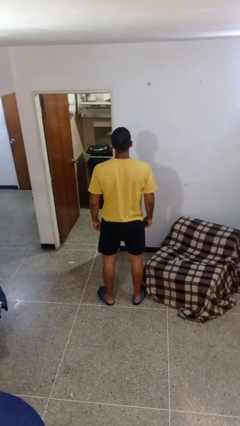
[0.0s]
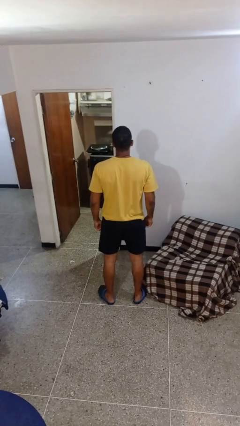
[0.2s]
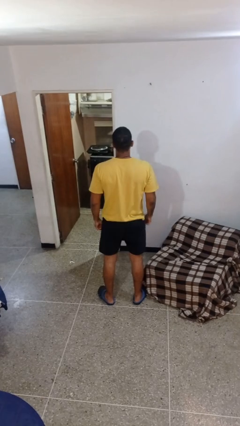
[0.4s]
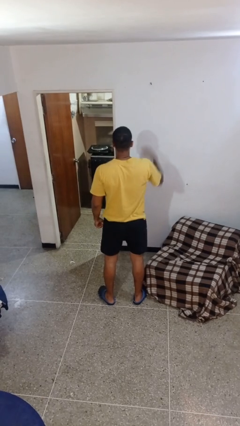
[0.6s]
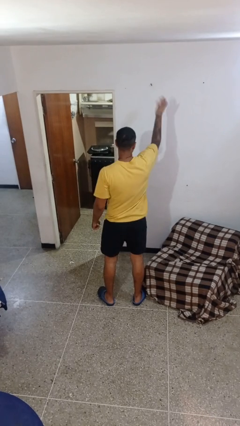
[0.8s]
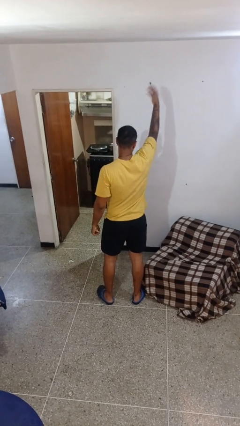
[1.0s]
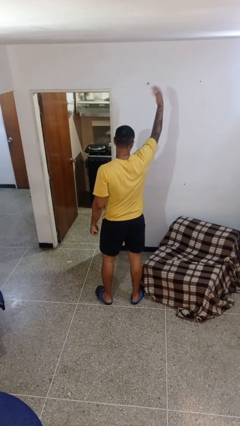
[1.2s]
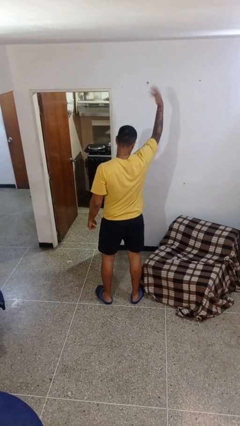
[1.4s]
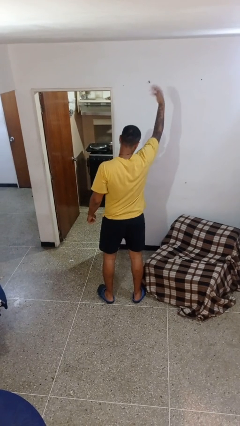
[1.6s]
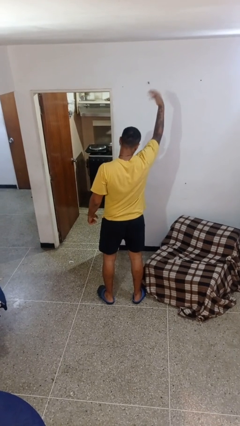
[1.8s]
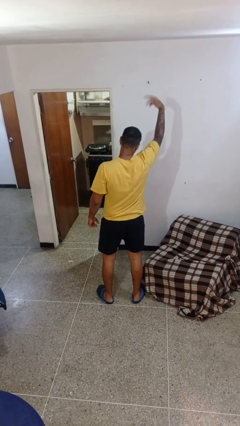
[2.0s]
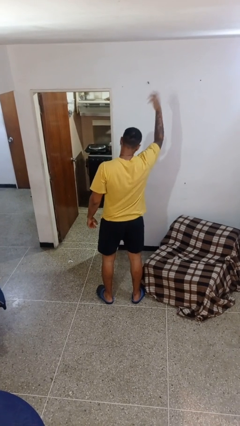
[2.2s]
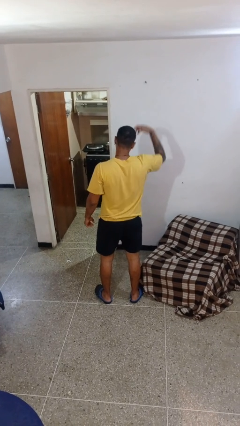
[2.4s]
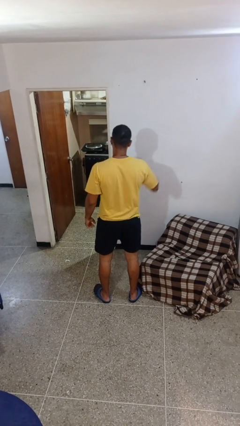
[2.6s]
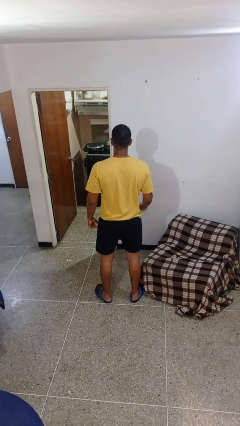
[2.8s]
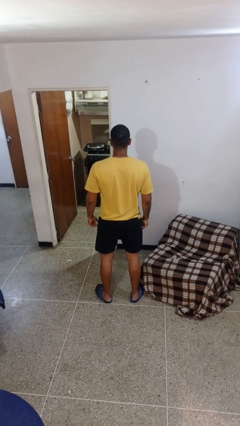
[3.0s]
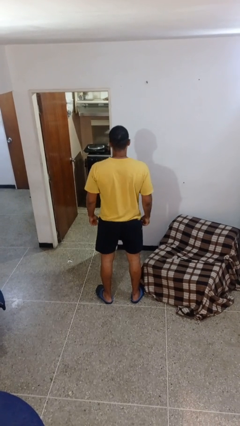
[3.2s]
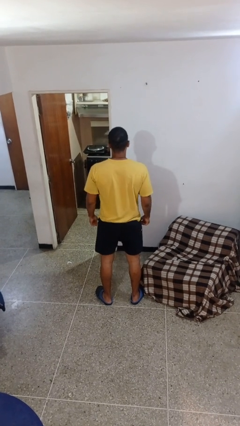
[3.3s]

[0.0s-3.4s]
person gestures come here

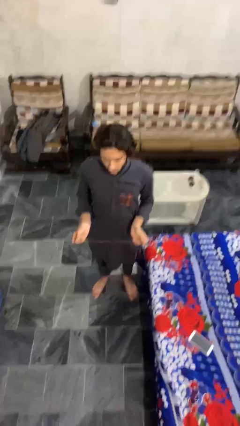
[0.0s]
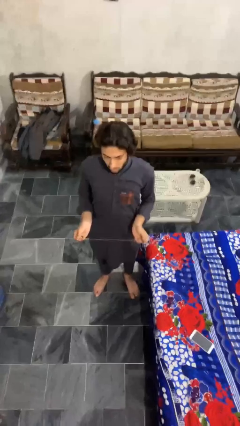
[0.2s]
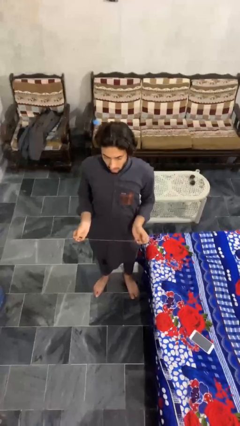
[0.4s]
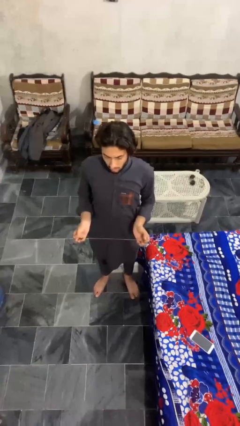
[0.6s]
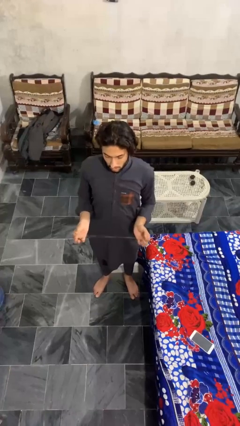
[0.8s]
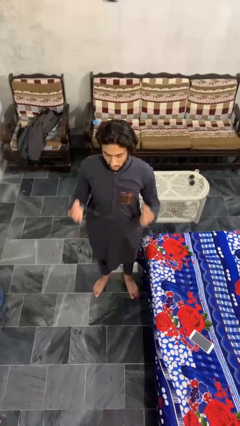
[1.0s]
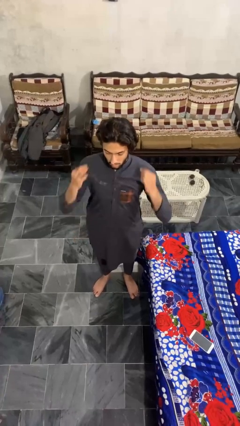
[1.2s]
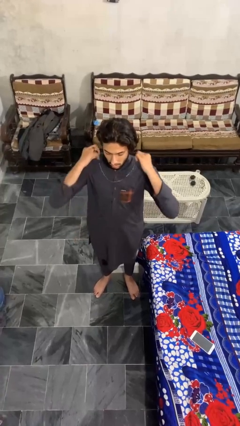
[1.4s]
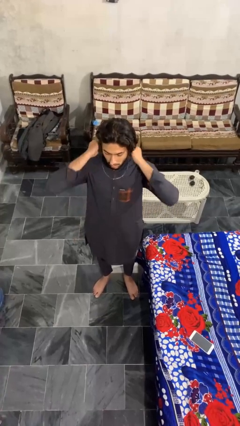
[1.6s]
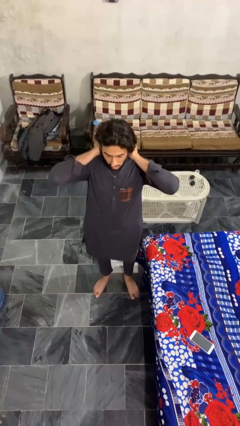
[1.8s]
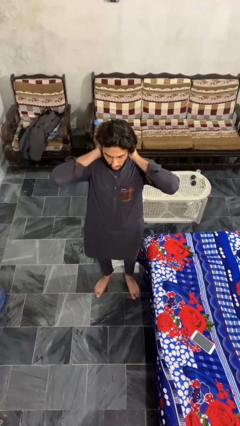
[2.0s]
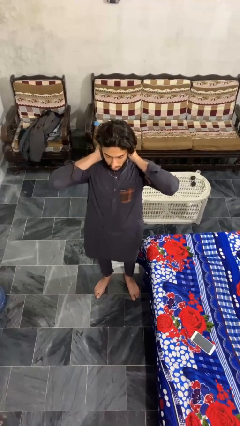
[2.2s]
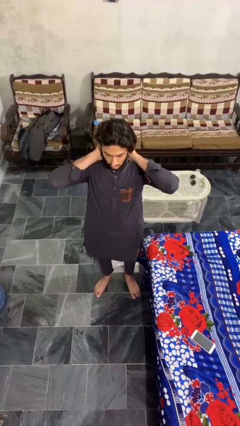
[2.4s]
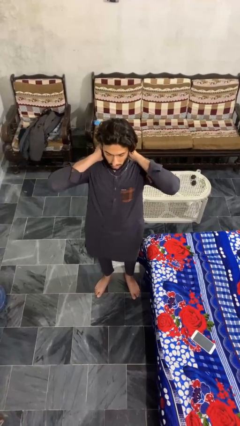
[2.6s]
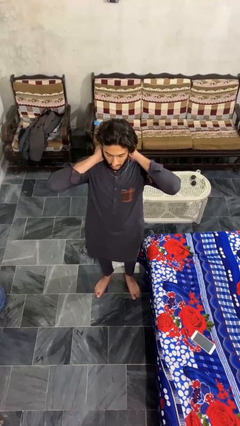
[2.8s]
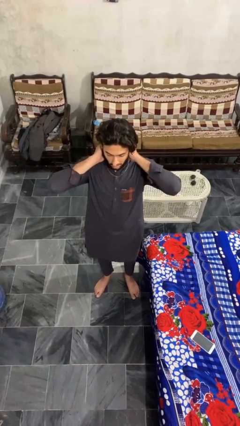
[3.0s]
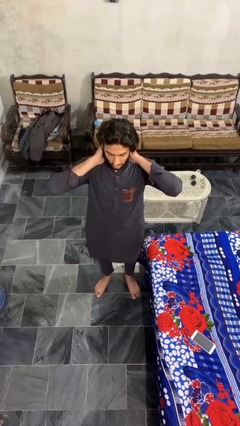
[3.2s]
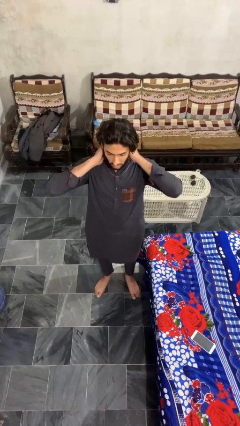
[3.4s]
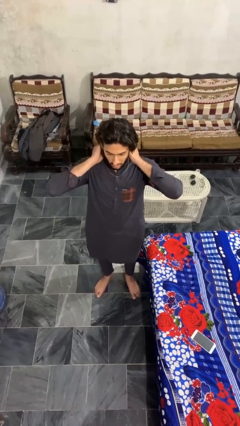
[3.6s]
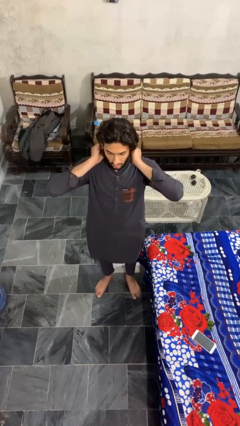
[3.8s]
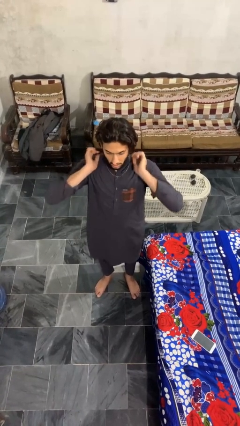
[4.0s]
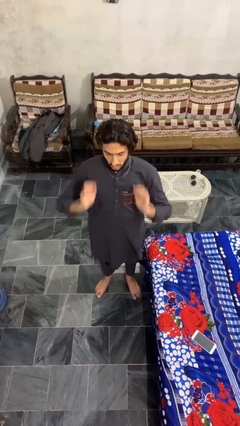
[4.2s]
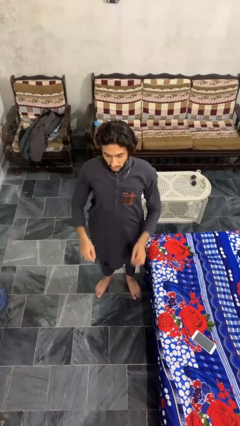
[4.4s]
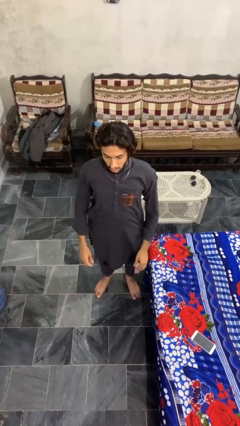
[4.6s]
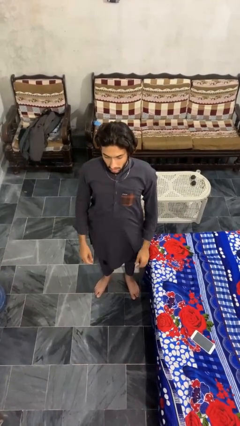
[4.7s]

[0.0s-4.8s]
person puts on necklace

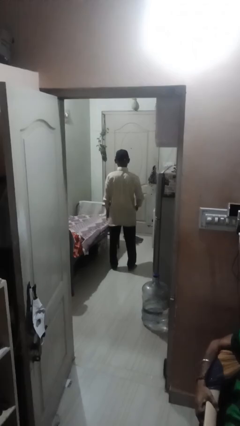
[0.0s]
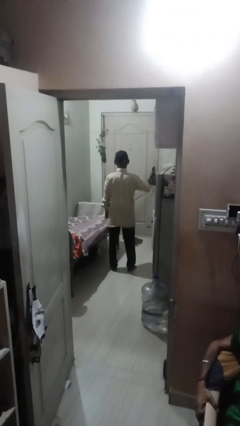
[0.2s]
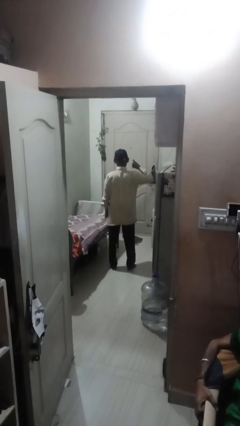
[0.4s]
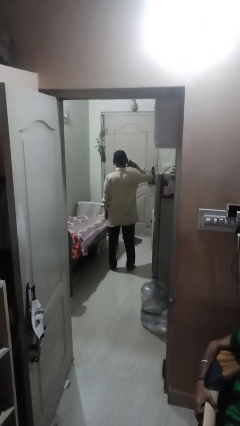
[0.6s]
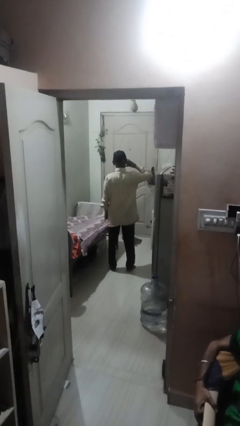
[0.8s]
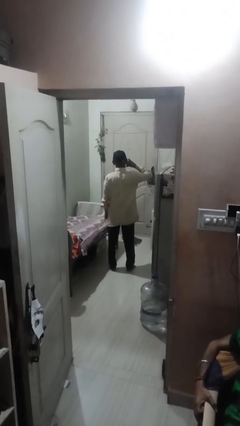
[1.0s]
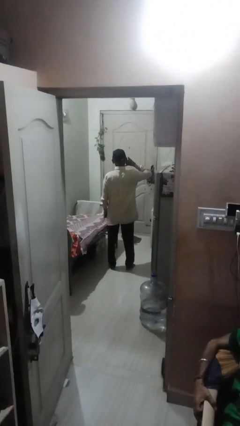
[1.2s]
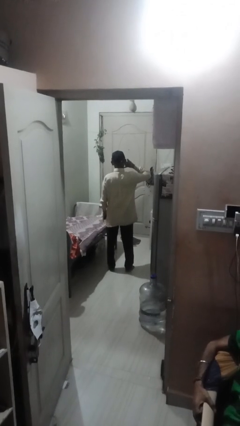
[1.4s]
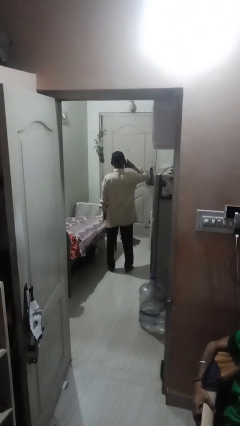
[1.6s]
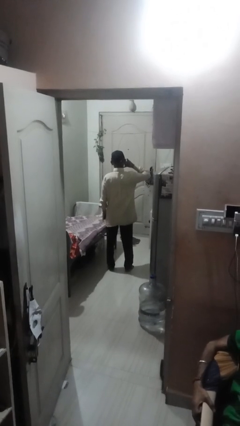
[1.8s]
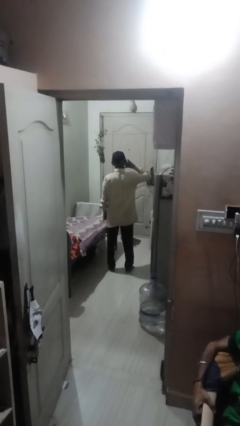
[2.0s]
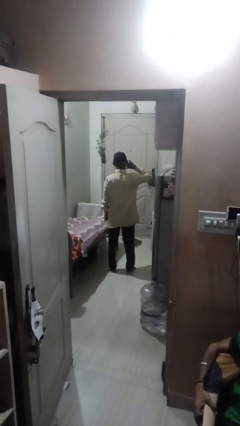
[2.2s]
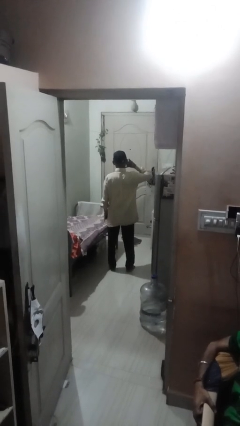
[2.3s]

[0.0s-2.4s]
person gestures call me

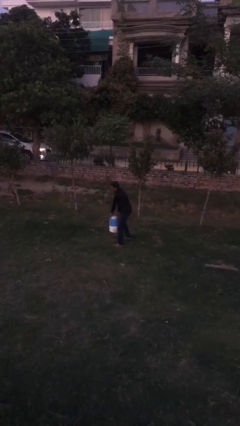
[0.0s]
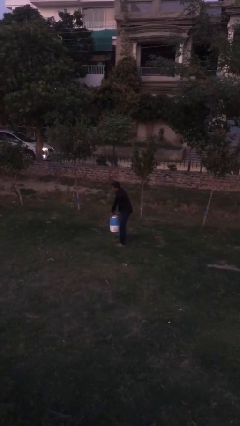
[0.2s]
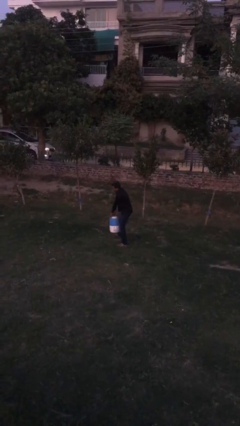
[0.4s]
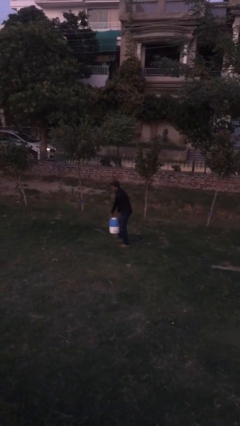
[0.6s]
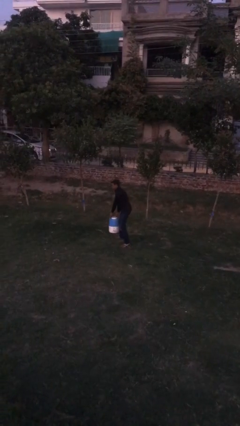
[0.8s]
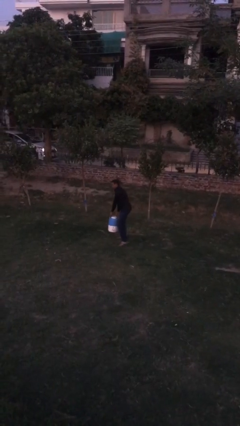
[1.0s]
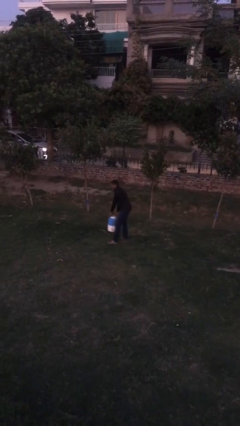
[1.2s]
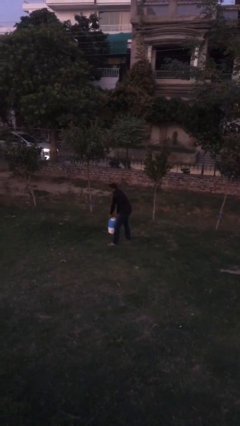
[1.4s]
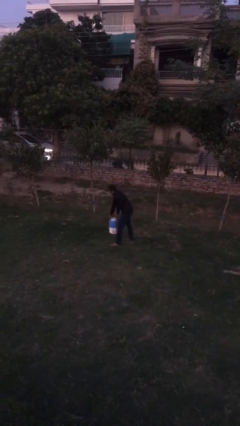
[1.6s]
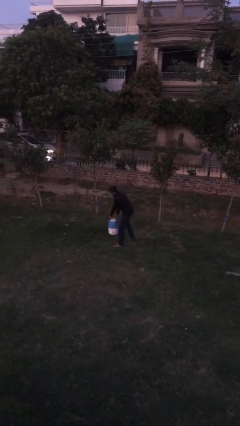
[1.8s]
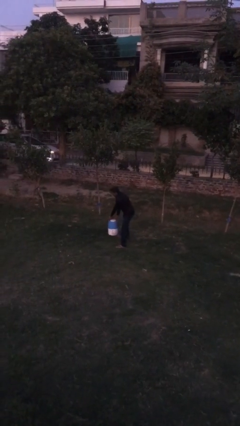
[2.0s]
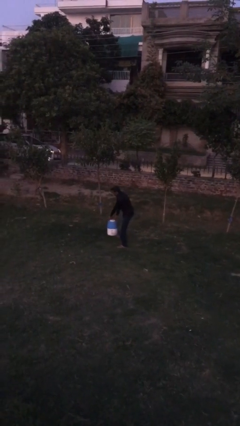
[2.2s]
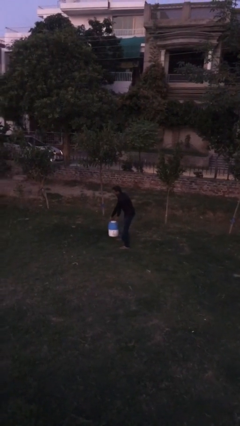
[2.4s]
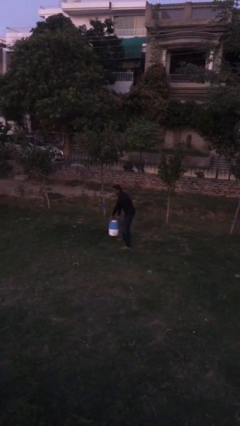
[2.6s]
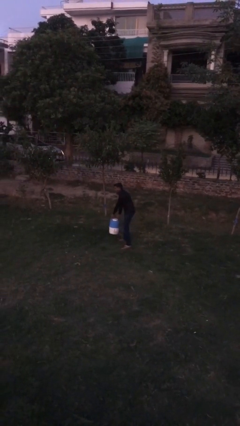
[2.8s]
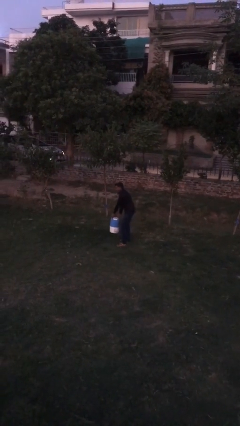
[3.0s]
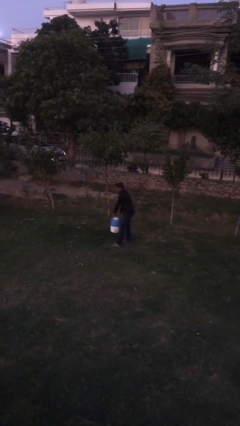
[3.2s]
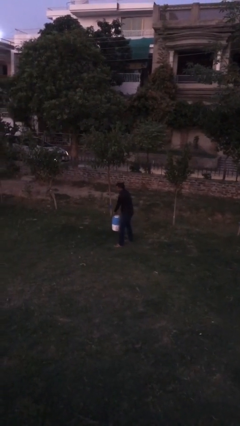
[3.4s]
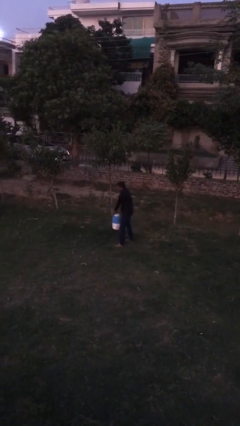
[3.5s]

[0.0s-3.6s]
person carries heavy object

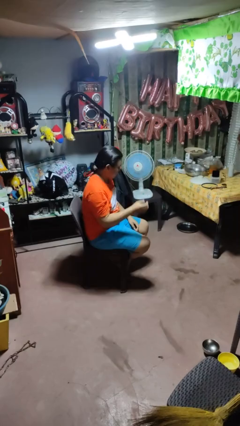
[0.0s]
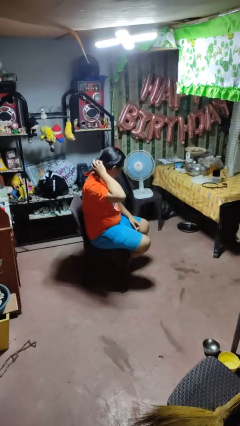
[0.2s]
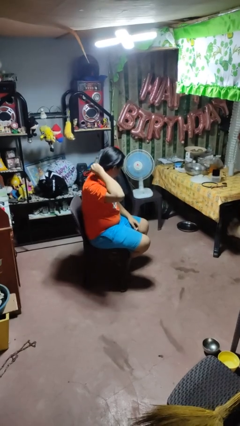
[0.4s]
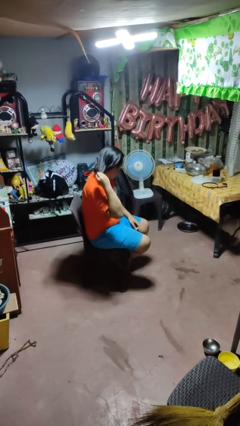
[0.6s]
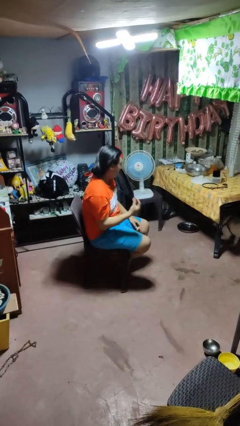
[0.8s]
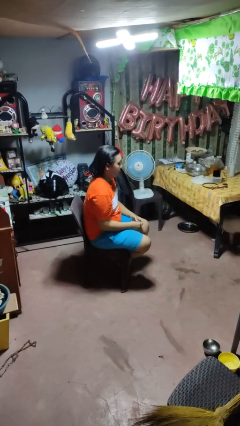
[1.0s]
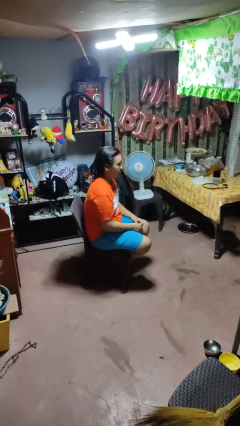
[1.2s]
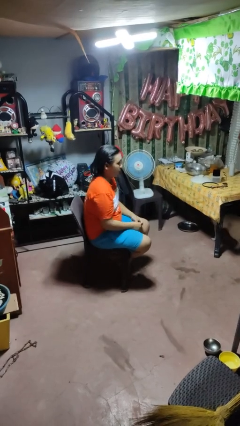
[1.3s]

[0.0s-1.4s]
person takes off hairtie

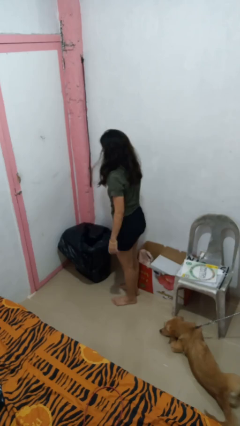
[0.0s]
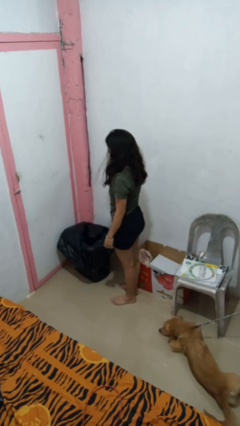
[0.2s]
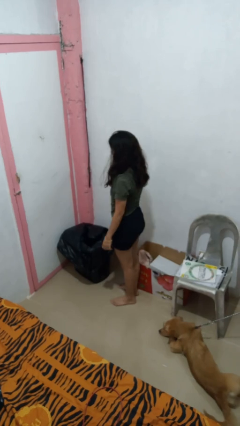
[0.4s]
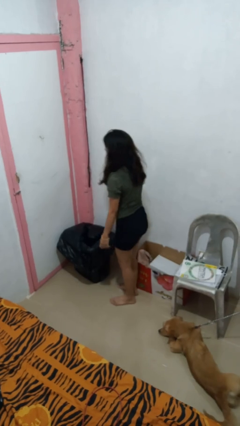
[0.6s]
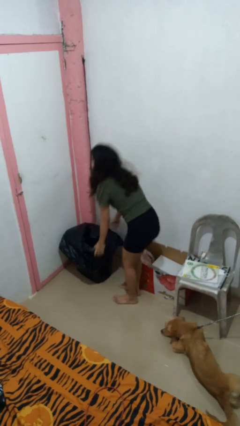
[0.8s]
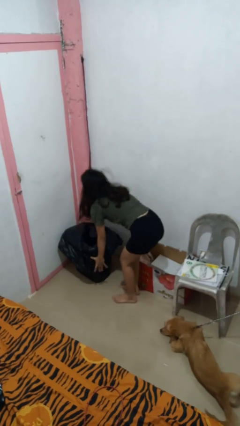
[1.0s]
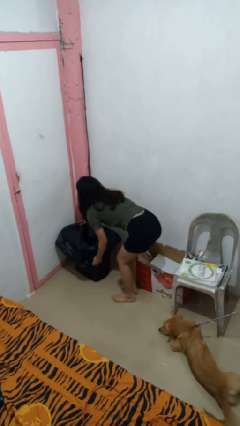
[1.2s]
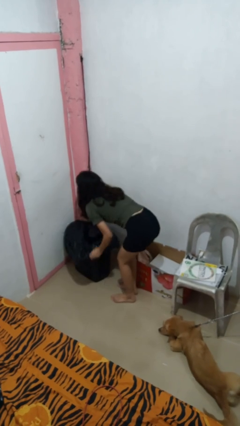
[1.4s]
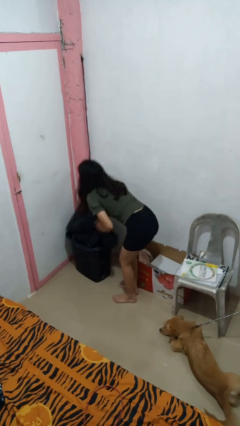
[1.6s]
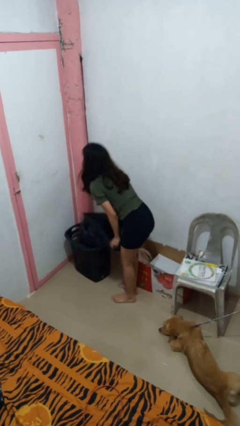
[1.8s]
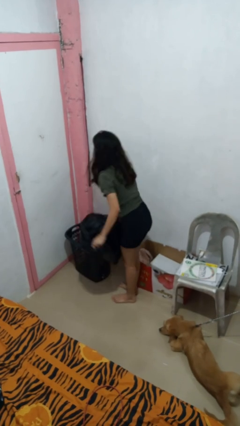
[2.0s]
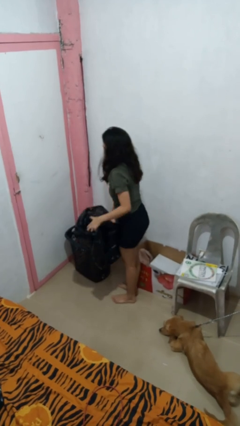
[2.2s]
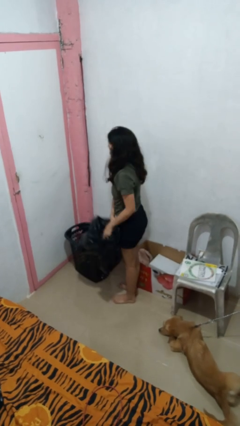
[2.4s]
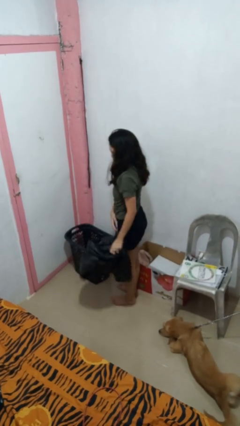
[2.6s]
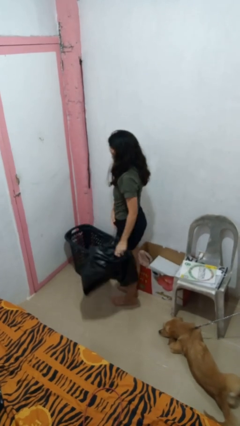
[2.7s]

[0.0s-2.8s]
person removes trashbag from trashcan
